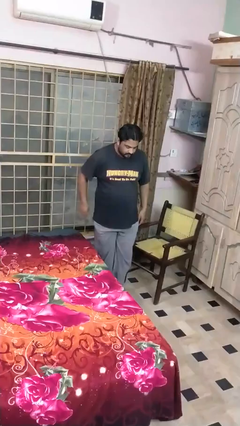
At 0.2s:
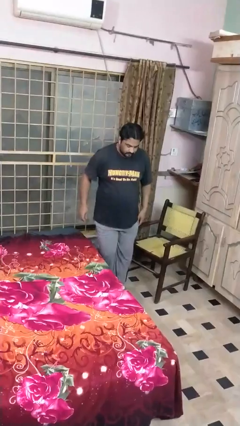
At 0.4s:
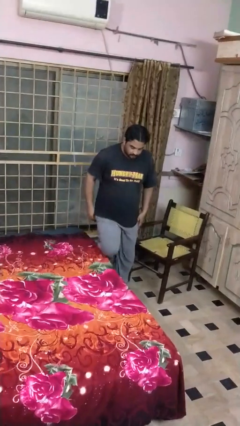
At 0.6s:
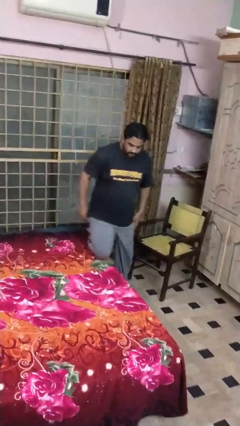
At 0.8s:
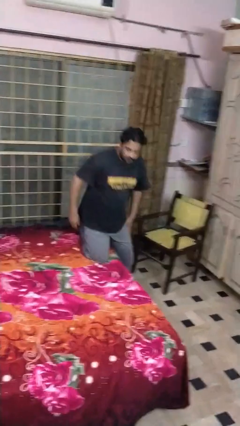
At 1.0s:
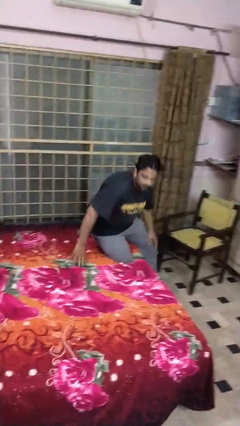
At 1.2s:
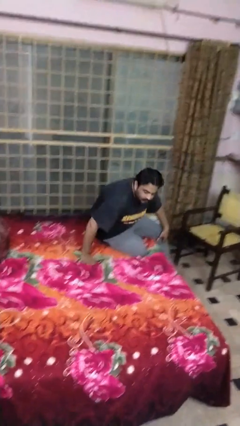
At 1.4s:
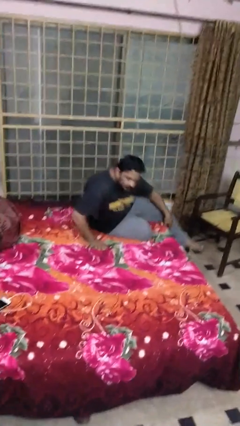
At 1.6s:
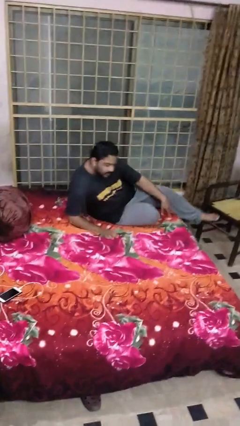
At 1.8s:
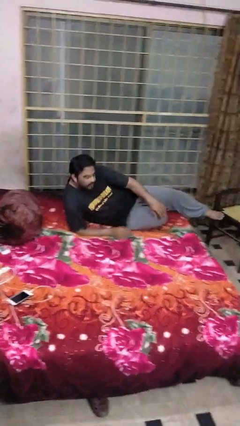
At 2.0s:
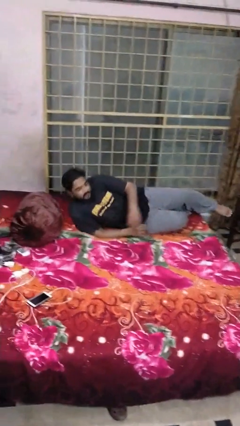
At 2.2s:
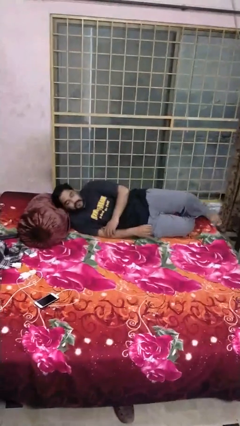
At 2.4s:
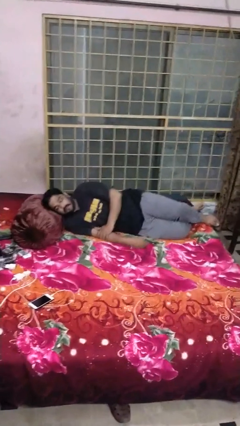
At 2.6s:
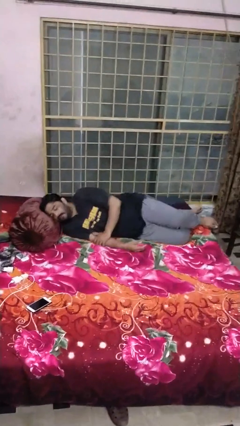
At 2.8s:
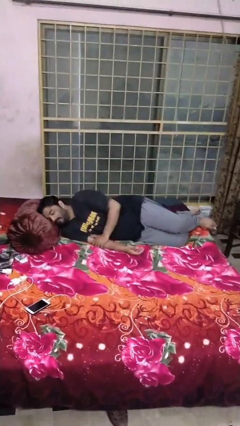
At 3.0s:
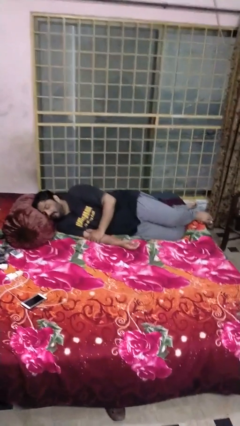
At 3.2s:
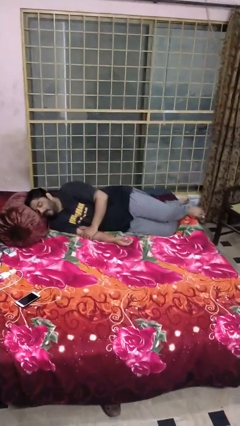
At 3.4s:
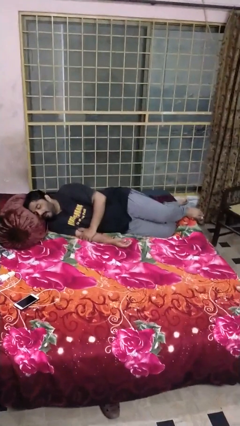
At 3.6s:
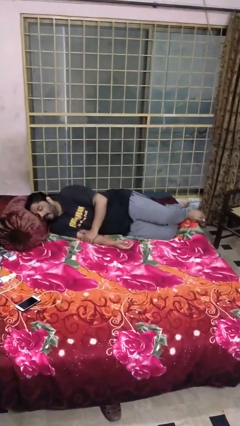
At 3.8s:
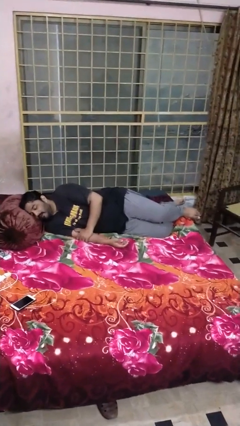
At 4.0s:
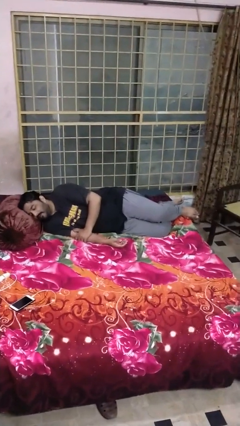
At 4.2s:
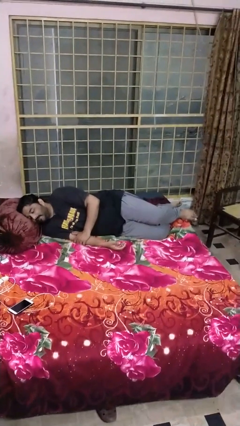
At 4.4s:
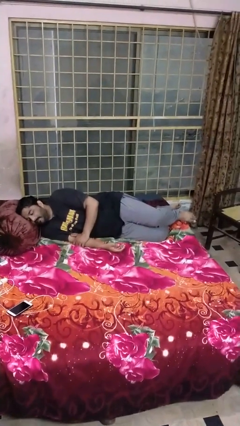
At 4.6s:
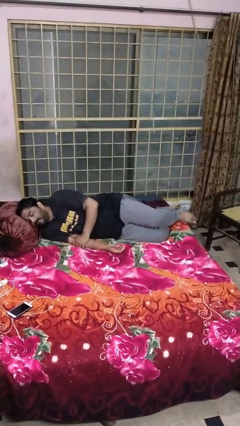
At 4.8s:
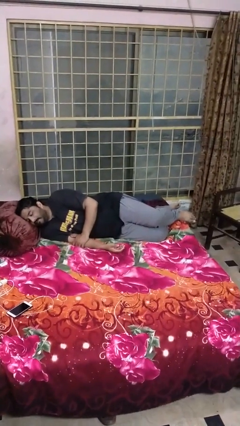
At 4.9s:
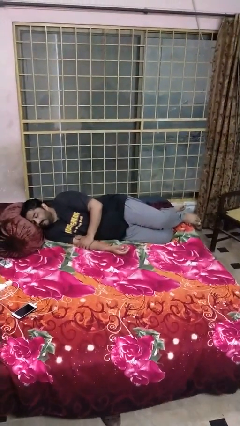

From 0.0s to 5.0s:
person lies down on bed

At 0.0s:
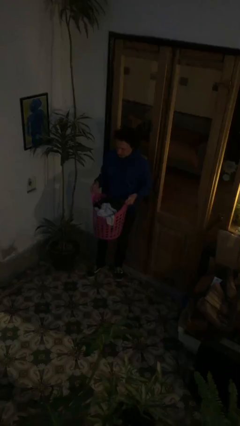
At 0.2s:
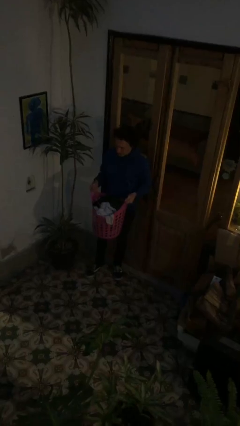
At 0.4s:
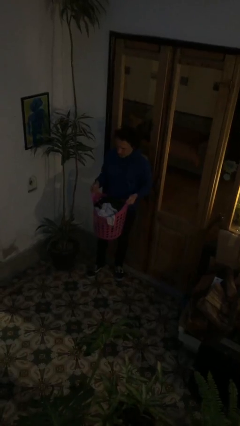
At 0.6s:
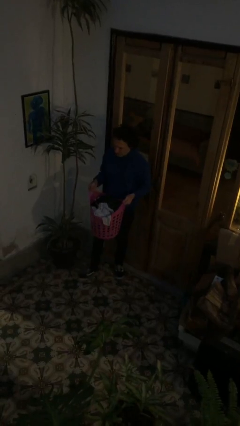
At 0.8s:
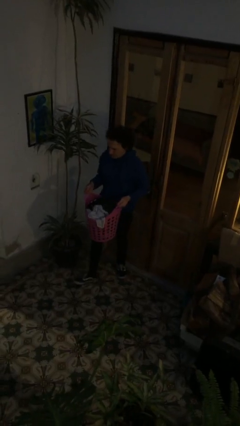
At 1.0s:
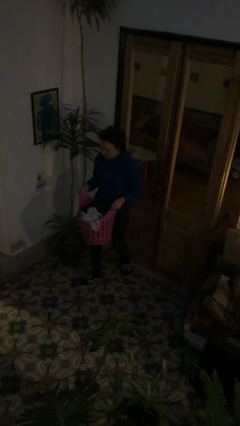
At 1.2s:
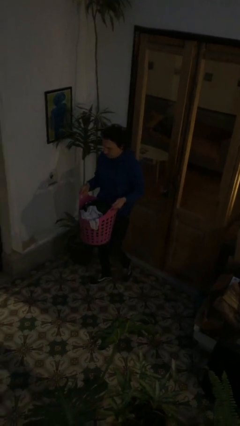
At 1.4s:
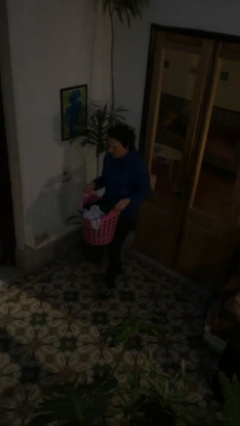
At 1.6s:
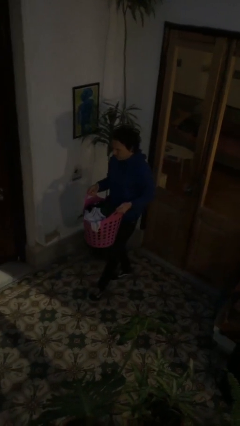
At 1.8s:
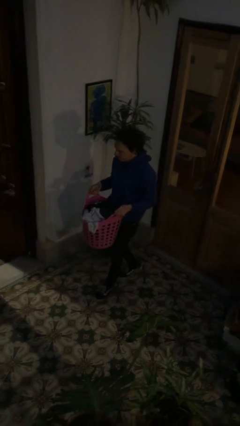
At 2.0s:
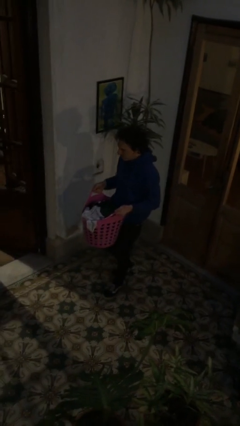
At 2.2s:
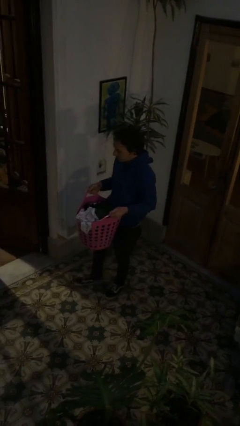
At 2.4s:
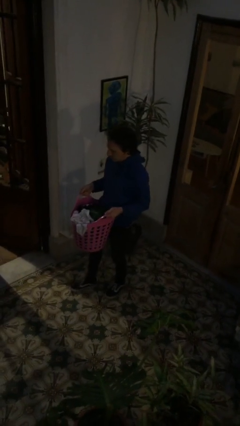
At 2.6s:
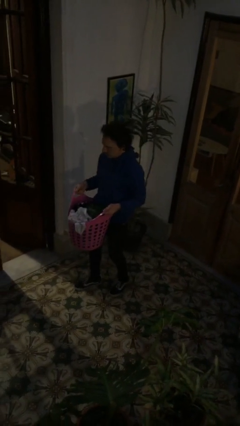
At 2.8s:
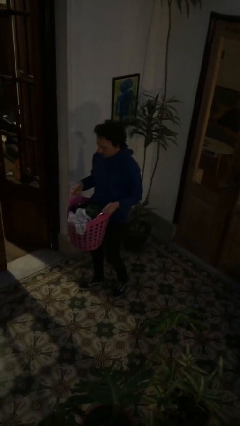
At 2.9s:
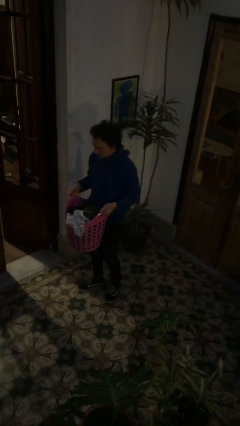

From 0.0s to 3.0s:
person carries laundry basket

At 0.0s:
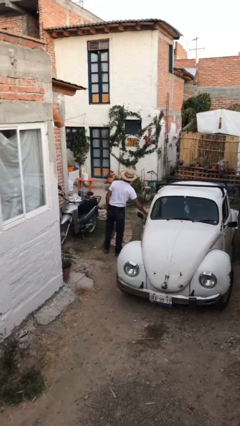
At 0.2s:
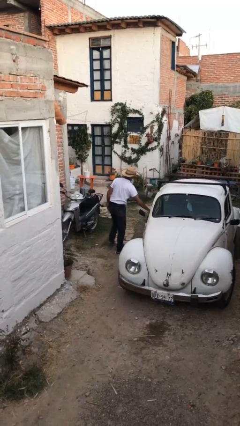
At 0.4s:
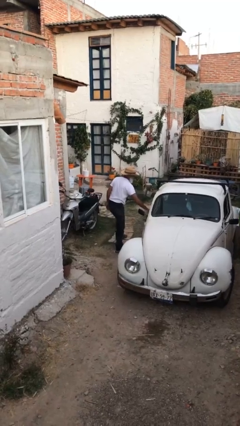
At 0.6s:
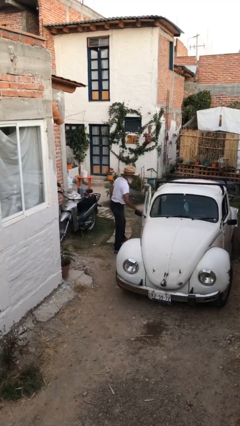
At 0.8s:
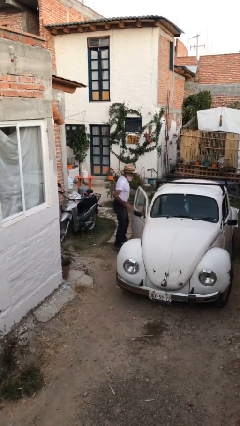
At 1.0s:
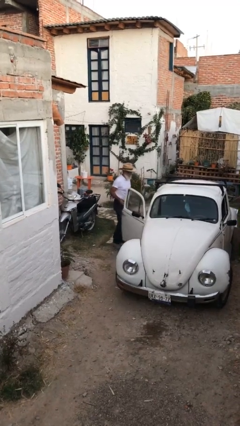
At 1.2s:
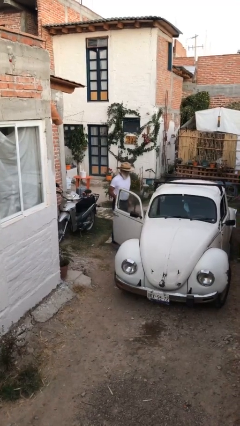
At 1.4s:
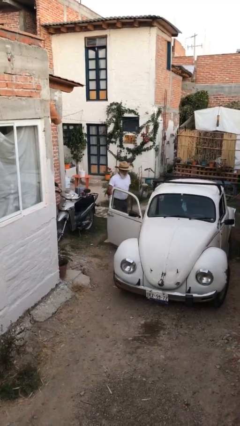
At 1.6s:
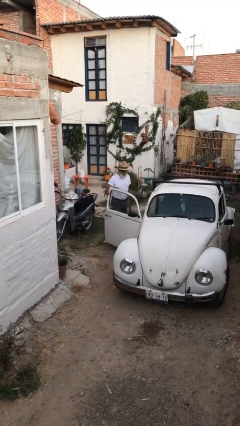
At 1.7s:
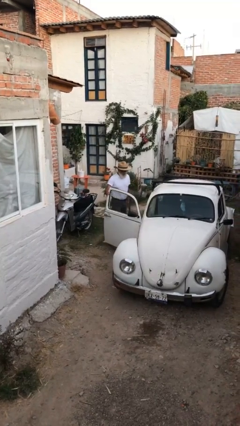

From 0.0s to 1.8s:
person opens car door

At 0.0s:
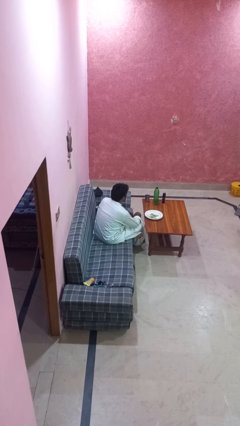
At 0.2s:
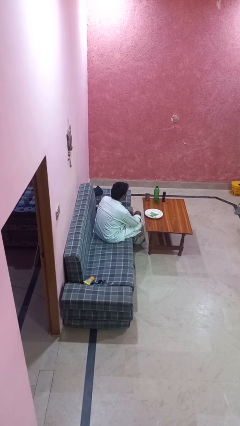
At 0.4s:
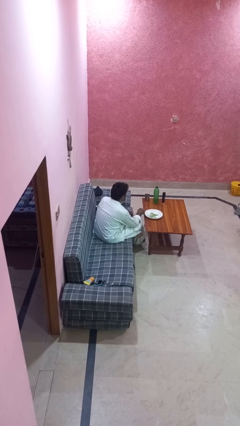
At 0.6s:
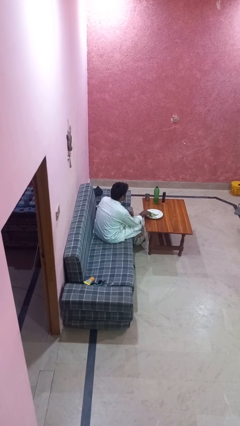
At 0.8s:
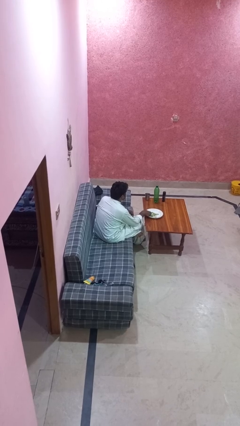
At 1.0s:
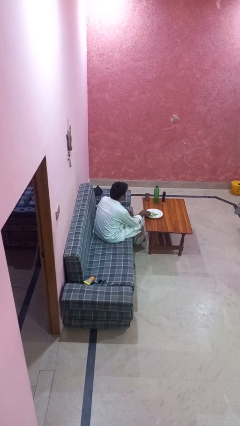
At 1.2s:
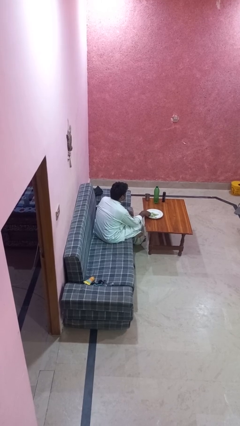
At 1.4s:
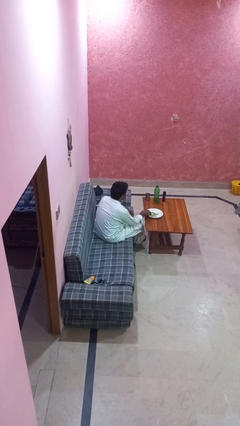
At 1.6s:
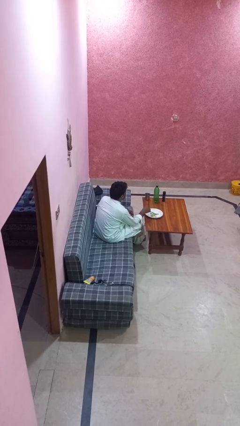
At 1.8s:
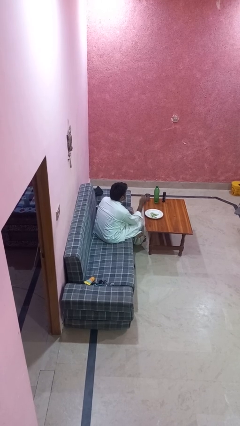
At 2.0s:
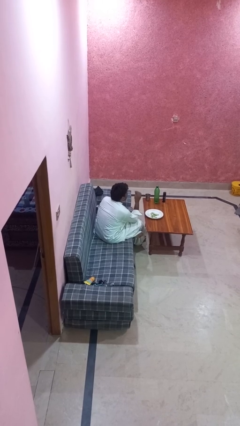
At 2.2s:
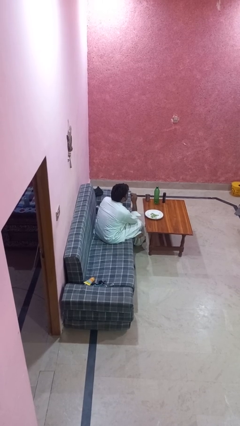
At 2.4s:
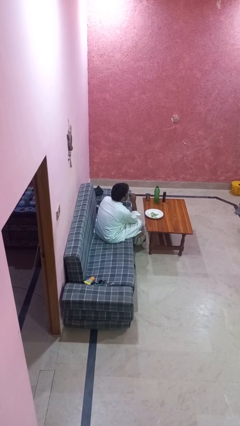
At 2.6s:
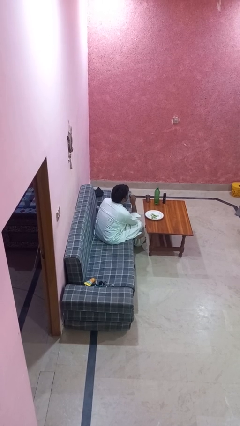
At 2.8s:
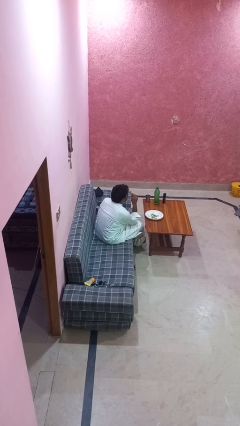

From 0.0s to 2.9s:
person eats with hands

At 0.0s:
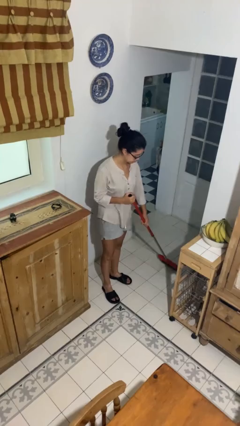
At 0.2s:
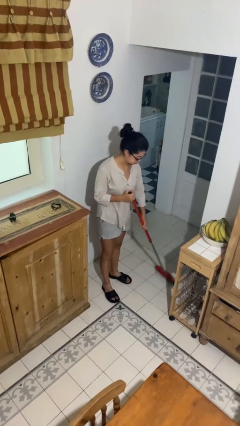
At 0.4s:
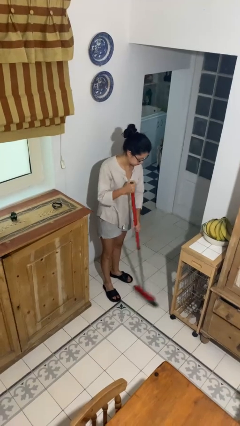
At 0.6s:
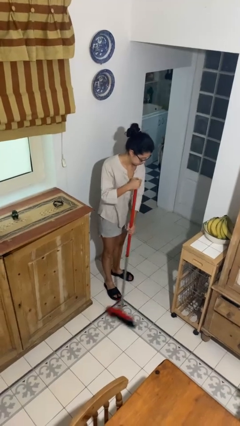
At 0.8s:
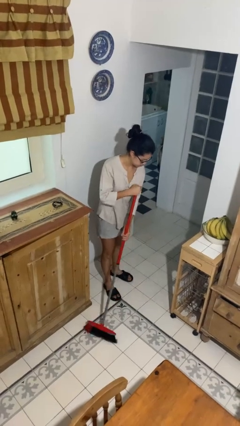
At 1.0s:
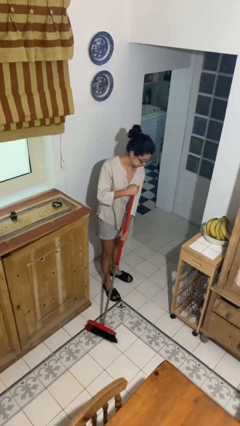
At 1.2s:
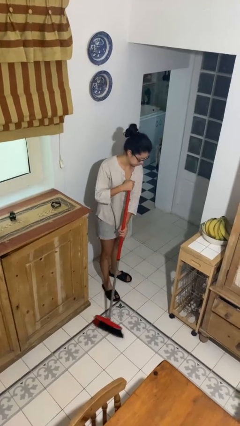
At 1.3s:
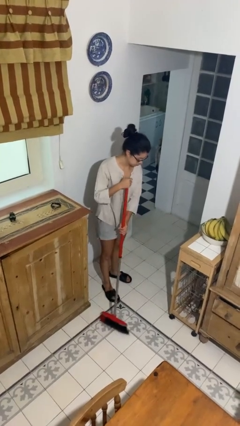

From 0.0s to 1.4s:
person sweeps floor

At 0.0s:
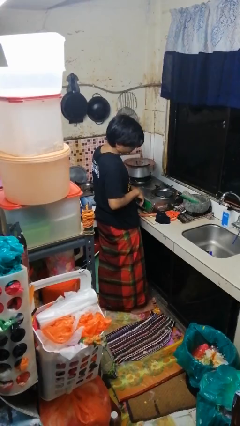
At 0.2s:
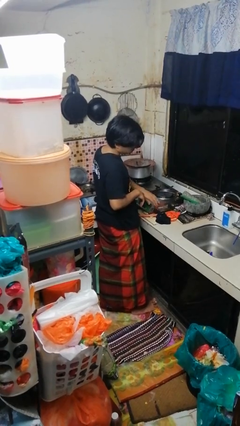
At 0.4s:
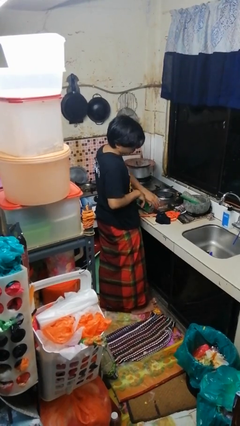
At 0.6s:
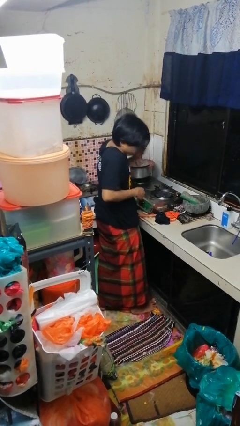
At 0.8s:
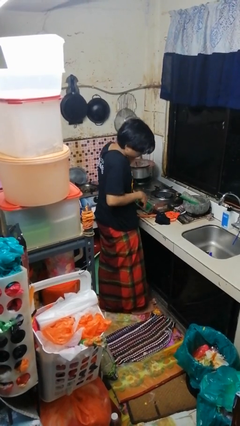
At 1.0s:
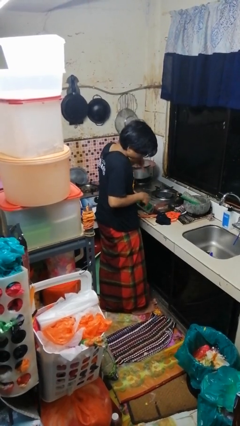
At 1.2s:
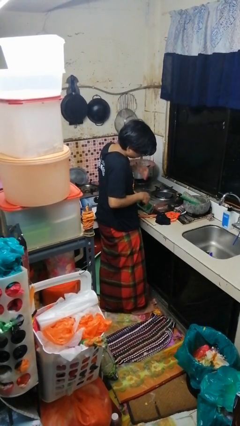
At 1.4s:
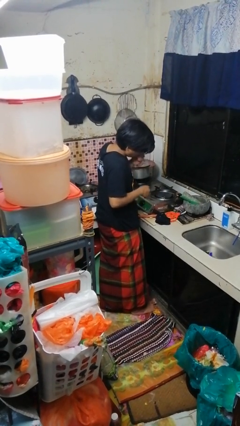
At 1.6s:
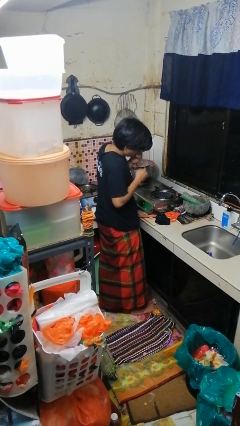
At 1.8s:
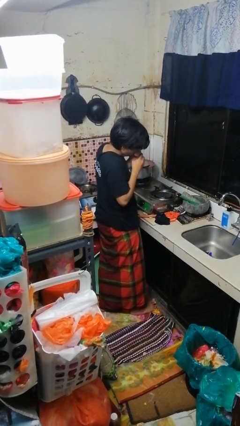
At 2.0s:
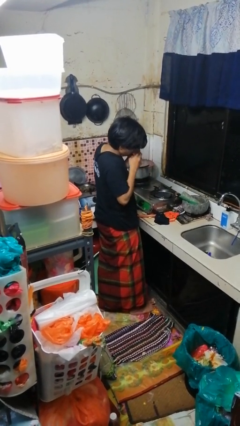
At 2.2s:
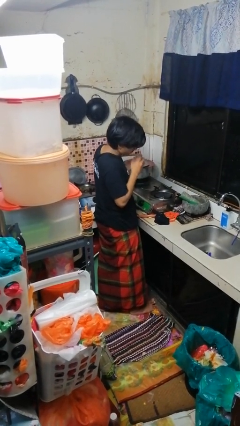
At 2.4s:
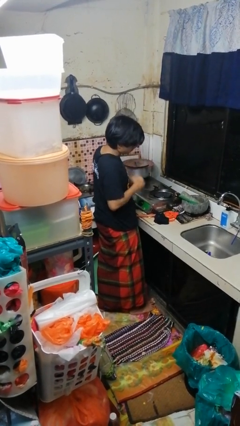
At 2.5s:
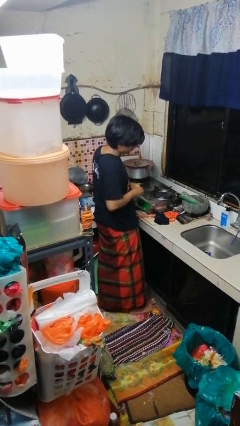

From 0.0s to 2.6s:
person burns hand

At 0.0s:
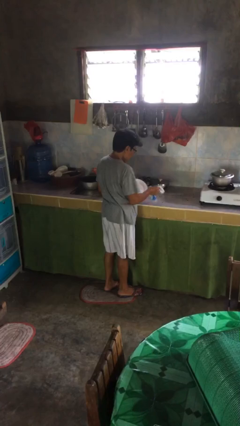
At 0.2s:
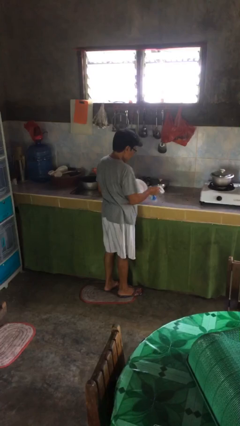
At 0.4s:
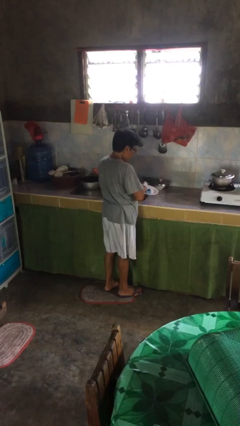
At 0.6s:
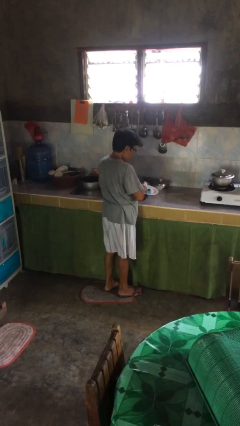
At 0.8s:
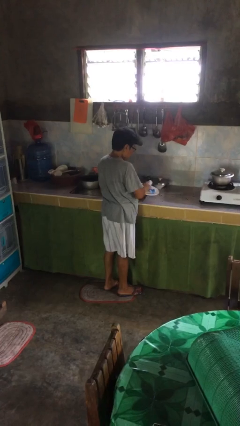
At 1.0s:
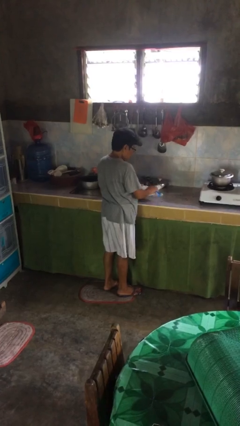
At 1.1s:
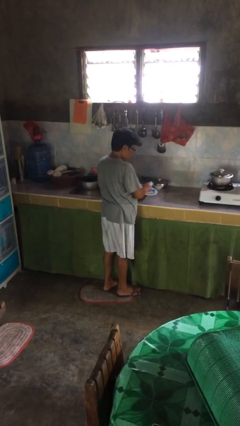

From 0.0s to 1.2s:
person dries dish
